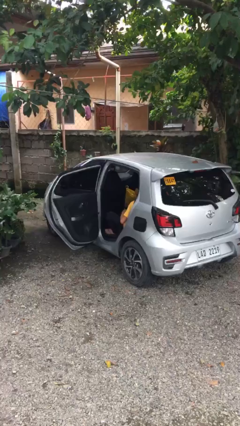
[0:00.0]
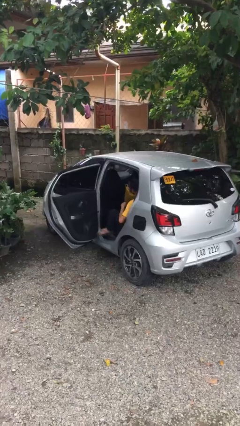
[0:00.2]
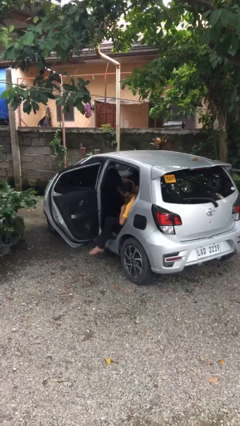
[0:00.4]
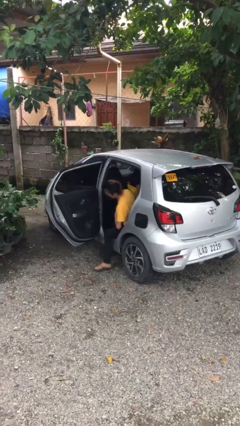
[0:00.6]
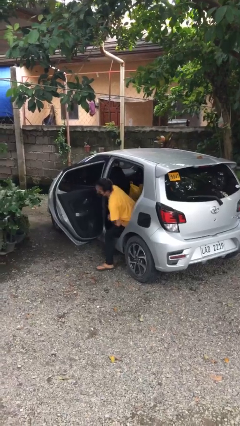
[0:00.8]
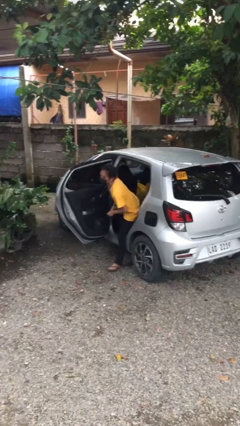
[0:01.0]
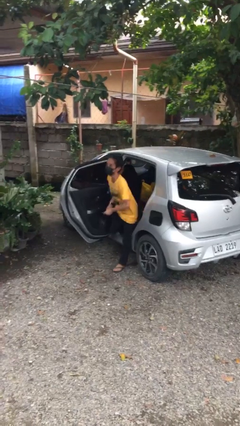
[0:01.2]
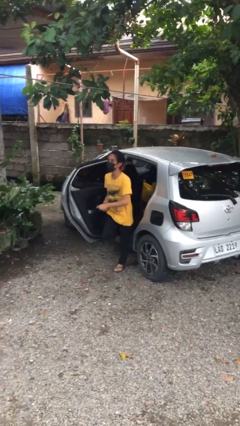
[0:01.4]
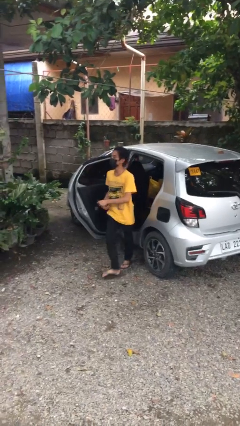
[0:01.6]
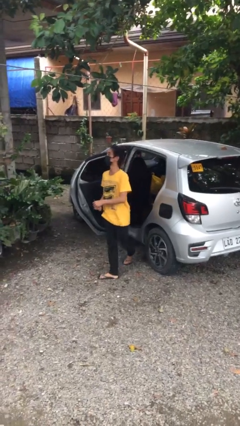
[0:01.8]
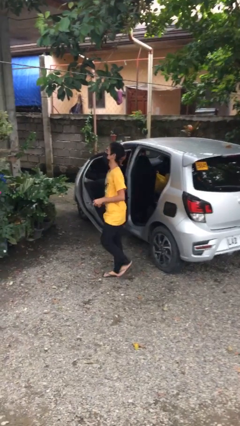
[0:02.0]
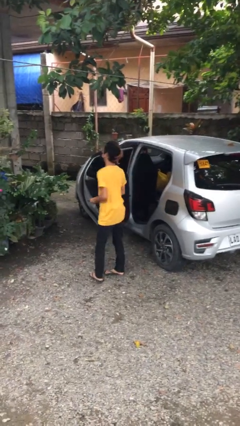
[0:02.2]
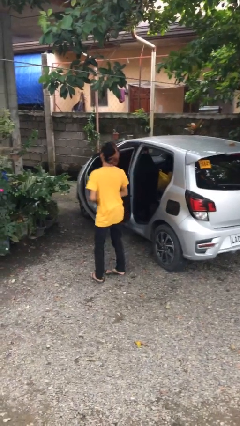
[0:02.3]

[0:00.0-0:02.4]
person exits car

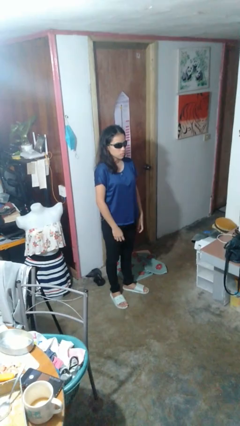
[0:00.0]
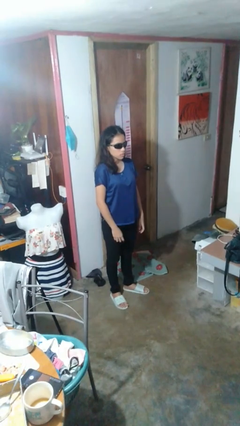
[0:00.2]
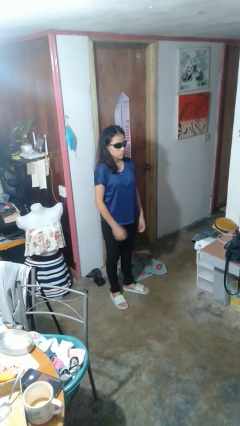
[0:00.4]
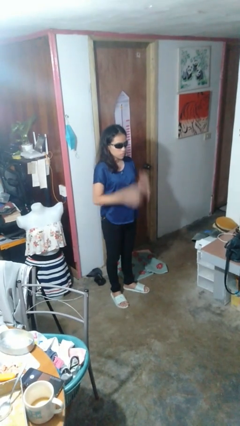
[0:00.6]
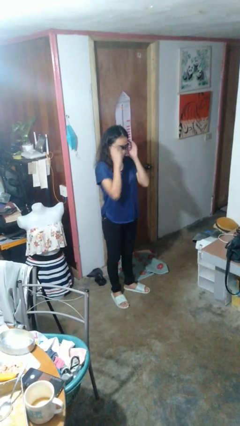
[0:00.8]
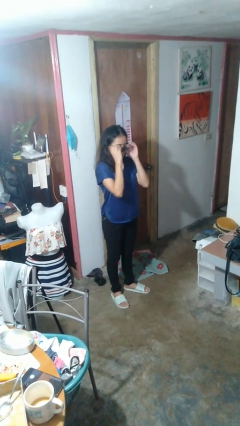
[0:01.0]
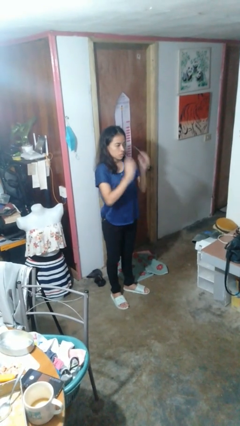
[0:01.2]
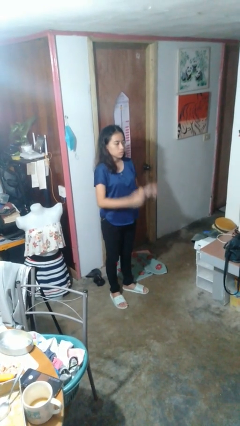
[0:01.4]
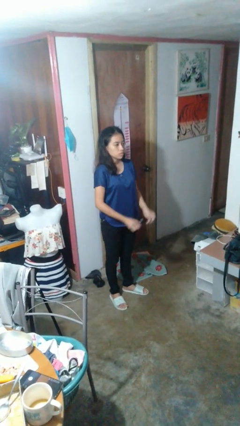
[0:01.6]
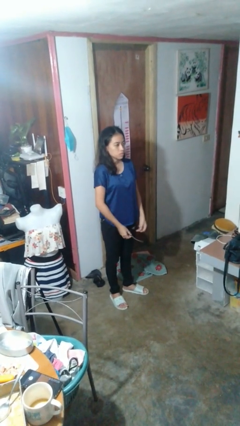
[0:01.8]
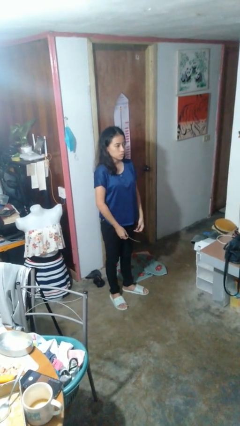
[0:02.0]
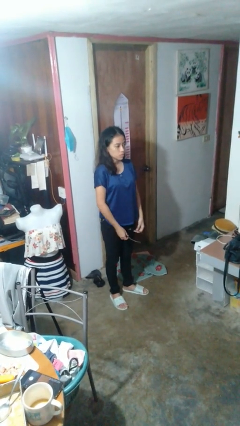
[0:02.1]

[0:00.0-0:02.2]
person takes off sunglasses

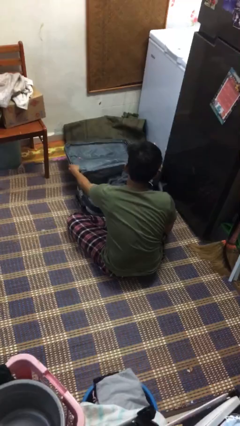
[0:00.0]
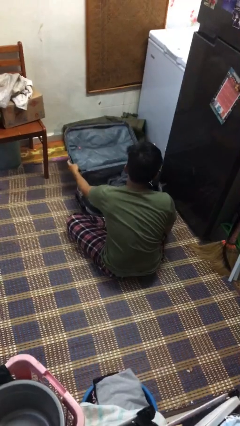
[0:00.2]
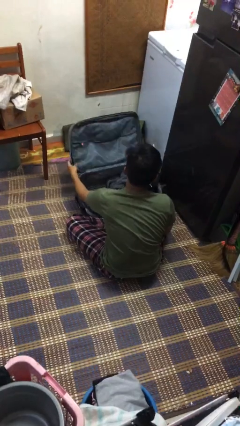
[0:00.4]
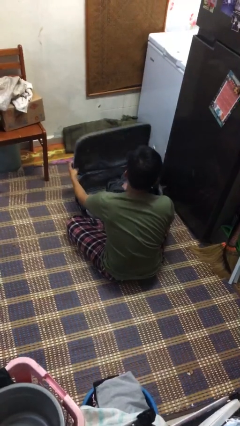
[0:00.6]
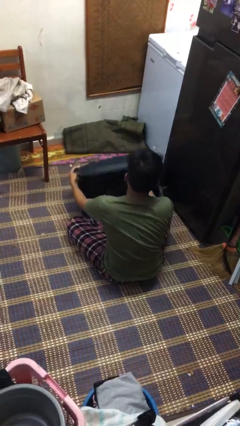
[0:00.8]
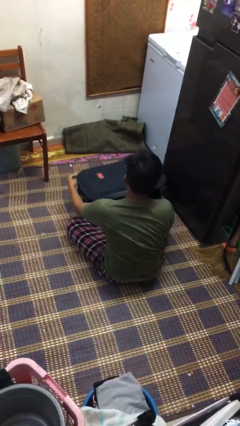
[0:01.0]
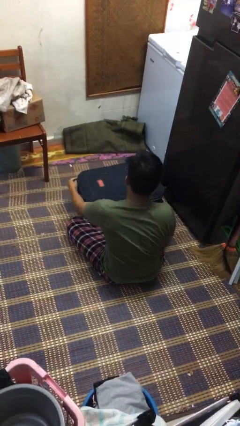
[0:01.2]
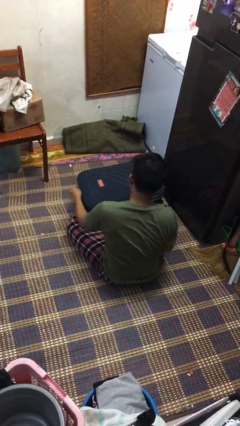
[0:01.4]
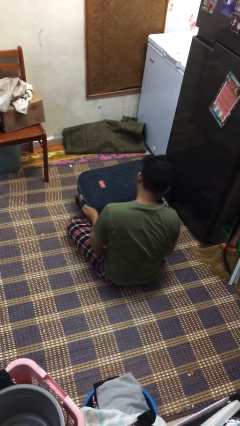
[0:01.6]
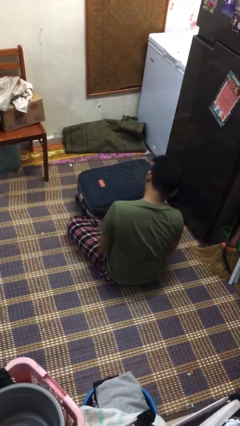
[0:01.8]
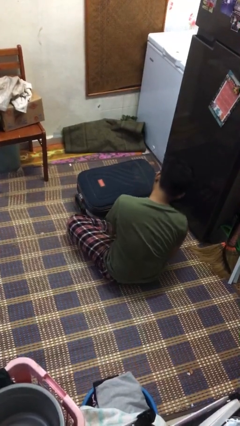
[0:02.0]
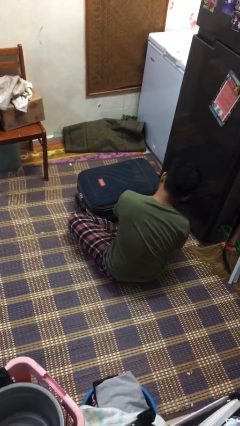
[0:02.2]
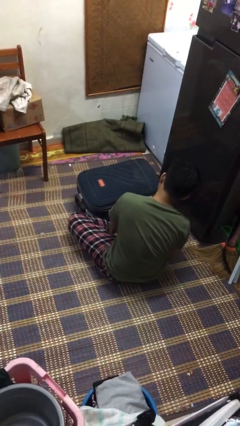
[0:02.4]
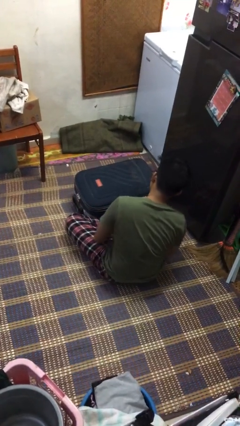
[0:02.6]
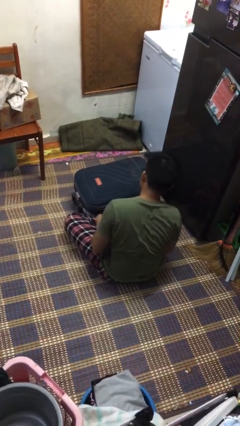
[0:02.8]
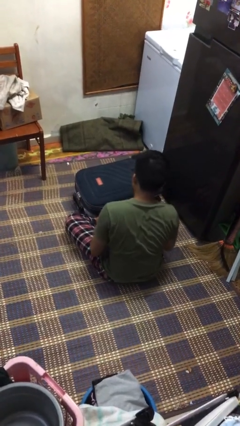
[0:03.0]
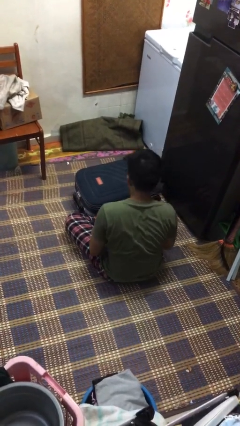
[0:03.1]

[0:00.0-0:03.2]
person closes suitcase

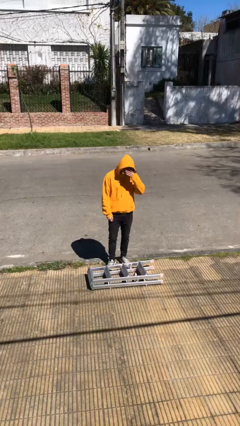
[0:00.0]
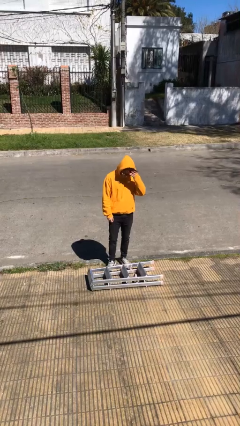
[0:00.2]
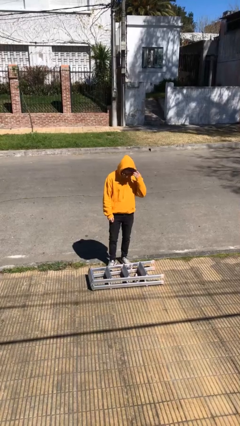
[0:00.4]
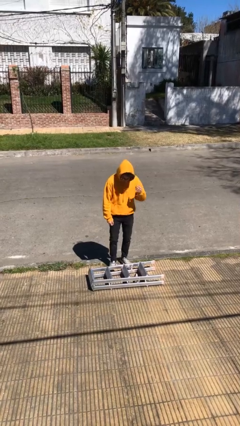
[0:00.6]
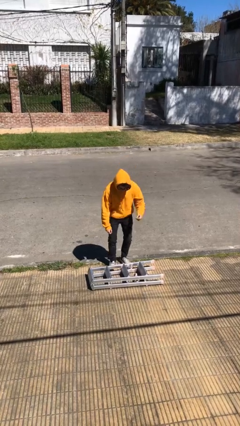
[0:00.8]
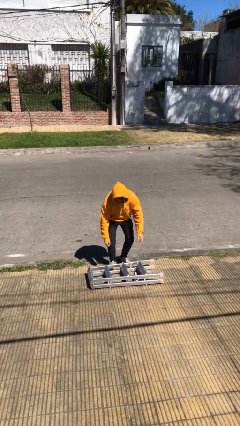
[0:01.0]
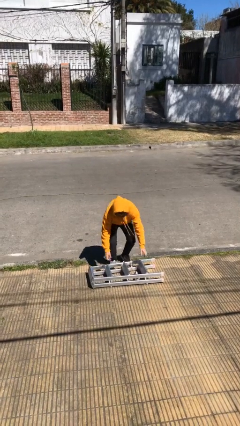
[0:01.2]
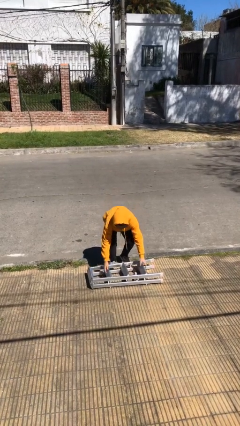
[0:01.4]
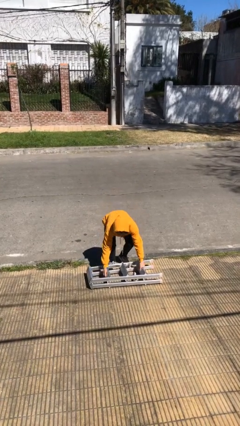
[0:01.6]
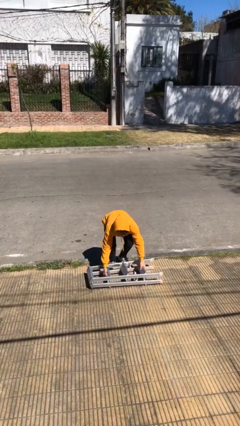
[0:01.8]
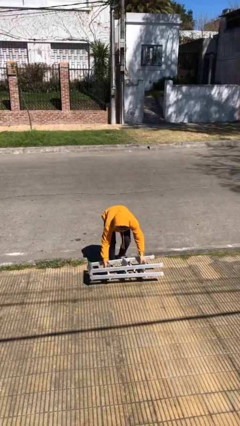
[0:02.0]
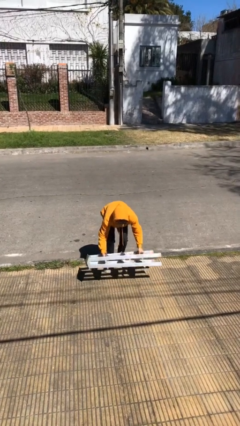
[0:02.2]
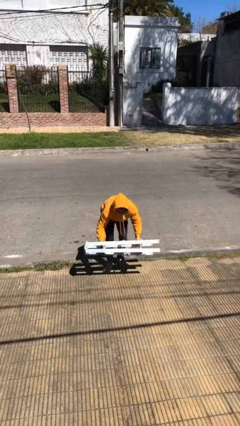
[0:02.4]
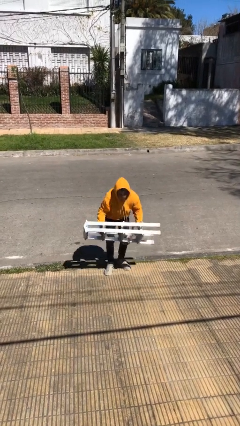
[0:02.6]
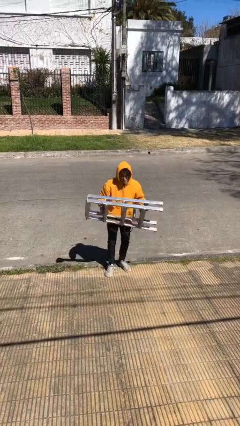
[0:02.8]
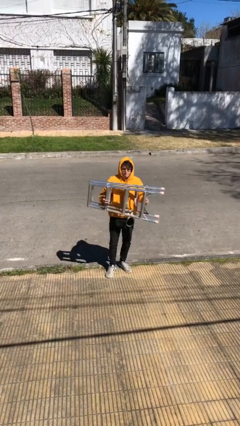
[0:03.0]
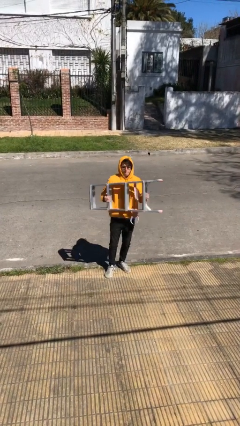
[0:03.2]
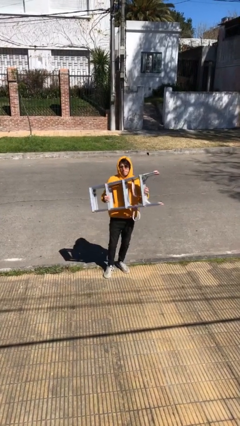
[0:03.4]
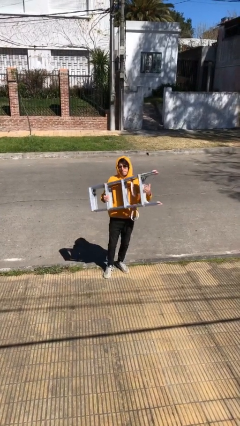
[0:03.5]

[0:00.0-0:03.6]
person picks up object from floor

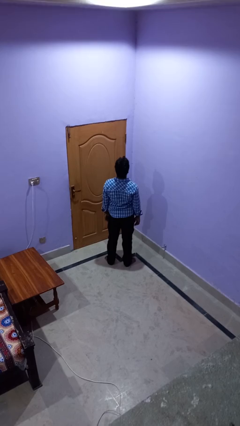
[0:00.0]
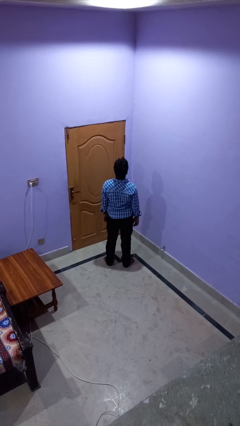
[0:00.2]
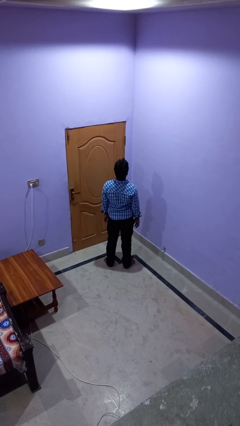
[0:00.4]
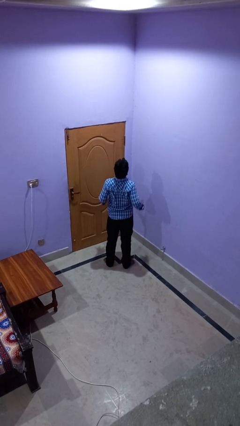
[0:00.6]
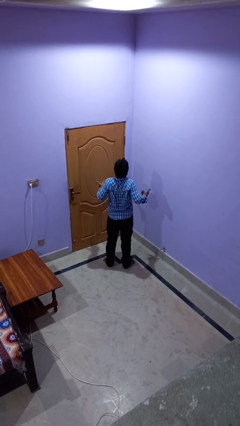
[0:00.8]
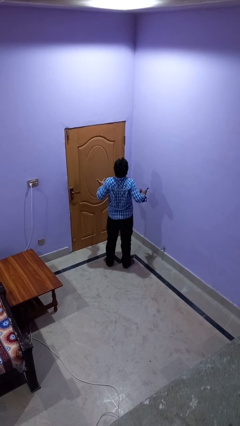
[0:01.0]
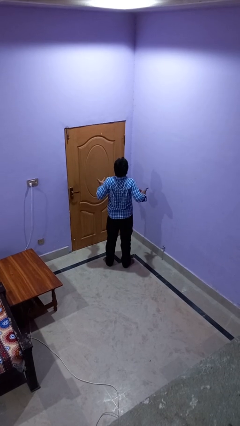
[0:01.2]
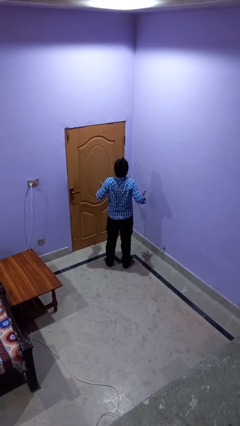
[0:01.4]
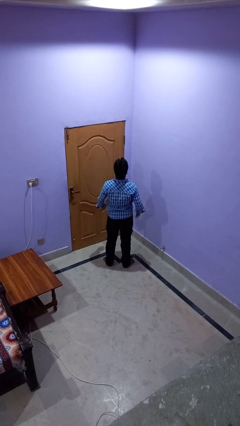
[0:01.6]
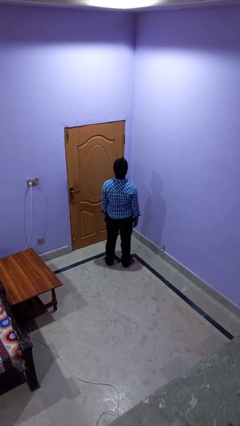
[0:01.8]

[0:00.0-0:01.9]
person shrugs

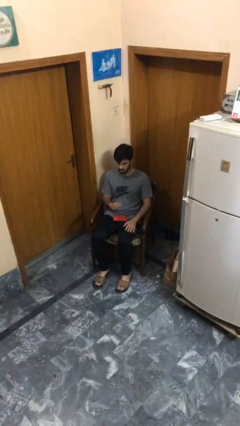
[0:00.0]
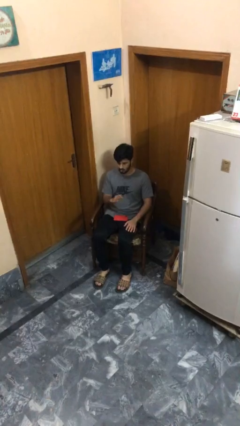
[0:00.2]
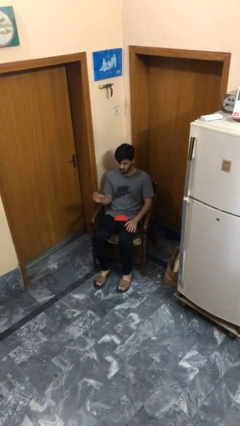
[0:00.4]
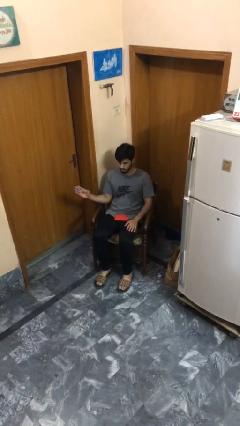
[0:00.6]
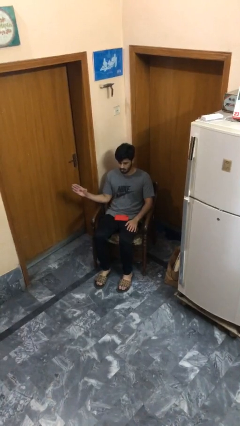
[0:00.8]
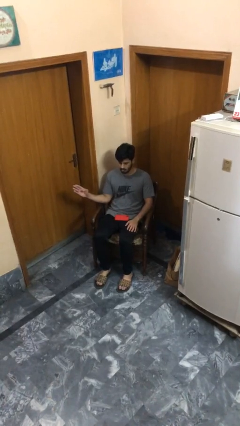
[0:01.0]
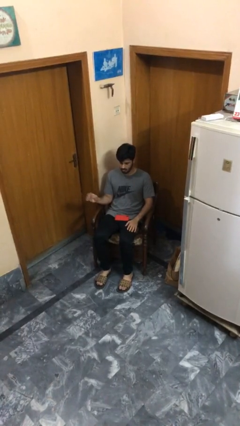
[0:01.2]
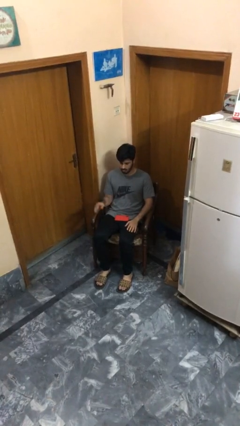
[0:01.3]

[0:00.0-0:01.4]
person gestures swipe right

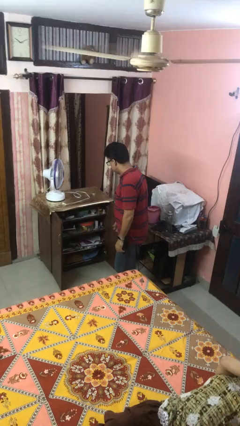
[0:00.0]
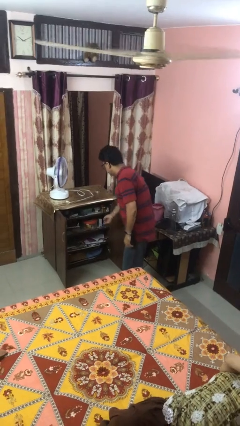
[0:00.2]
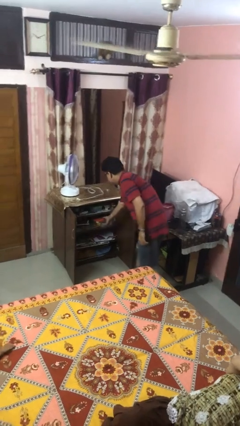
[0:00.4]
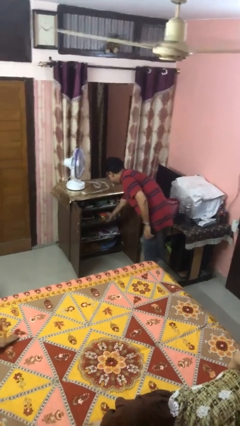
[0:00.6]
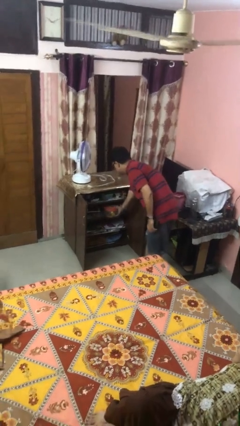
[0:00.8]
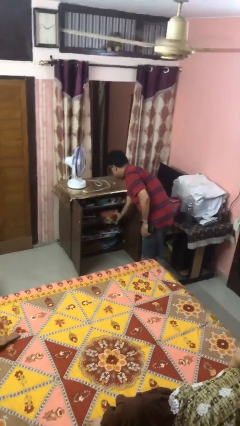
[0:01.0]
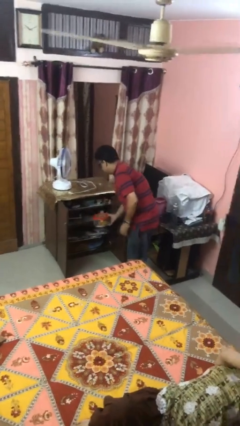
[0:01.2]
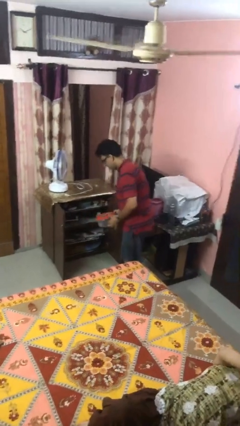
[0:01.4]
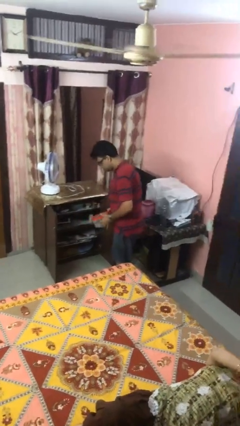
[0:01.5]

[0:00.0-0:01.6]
person picks up object from cabinet

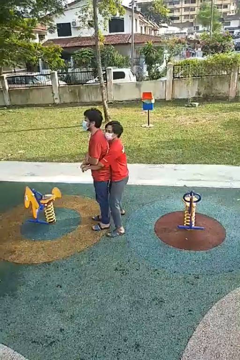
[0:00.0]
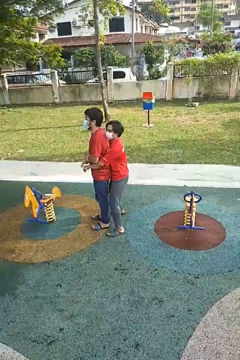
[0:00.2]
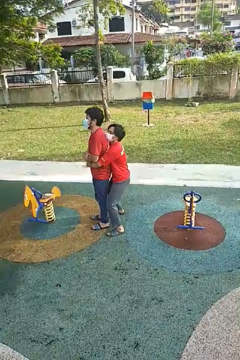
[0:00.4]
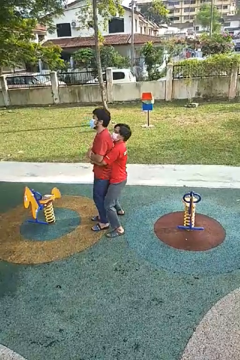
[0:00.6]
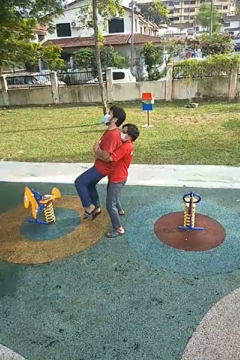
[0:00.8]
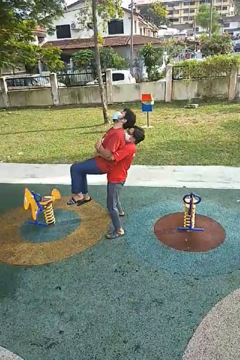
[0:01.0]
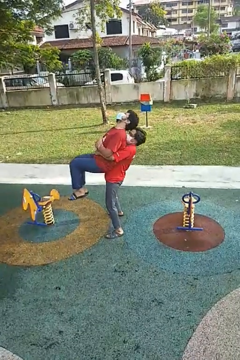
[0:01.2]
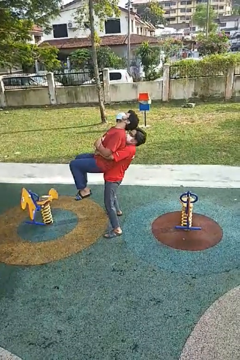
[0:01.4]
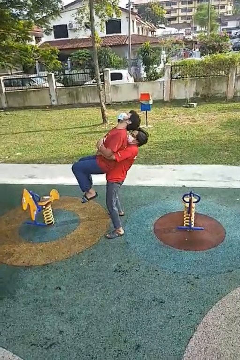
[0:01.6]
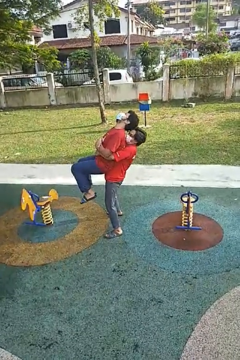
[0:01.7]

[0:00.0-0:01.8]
person picks up person
